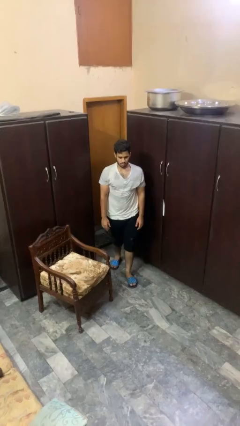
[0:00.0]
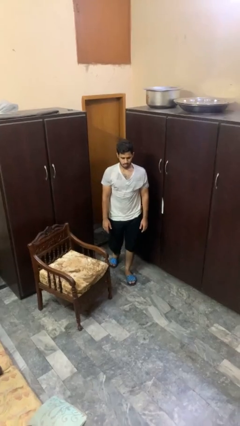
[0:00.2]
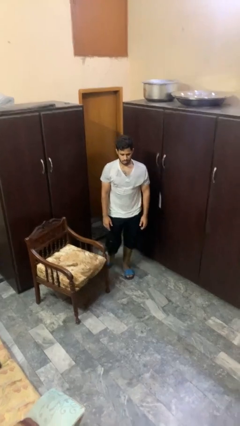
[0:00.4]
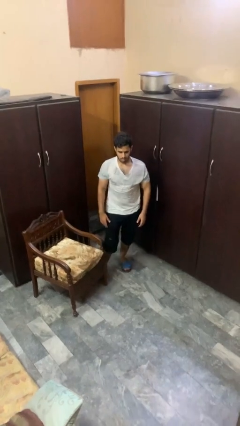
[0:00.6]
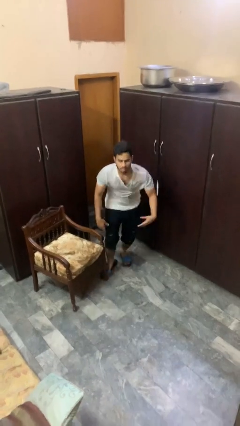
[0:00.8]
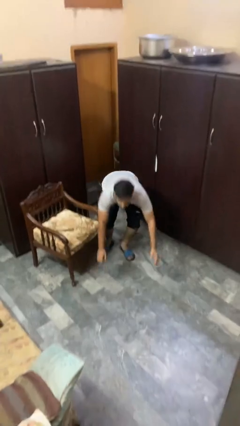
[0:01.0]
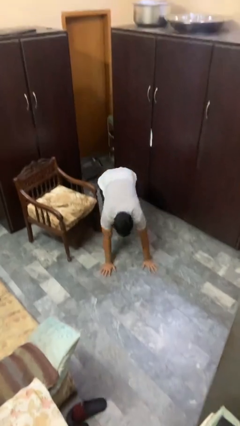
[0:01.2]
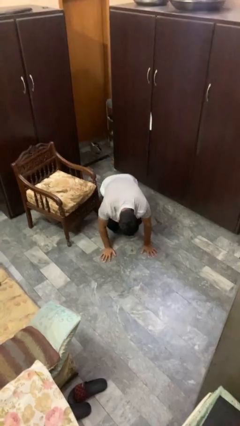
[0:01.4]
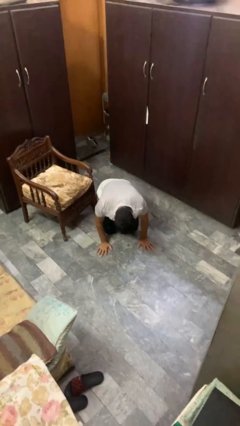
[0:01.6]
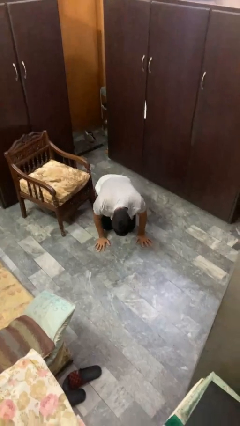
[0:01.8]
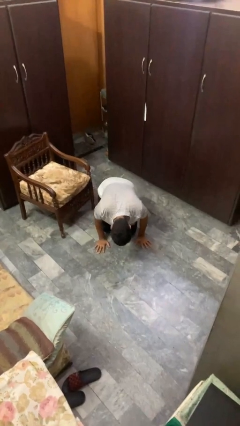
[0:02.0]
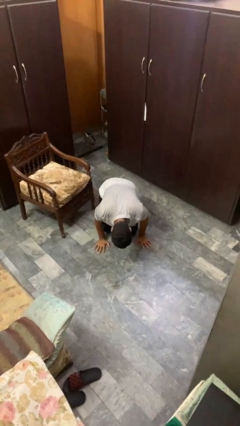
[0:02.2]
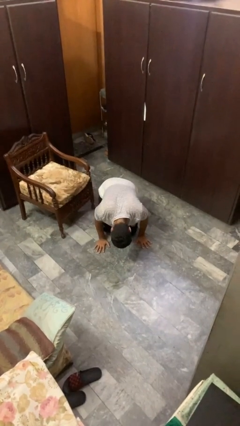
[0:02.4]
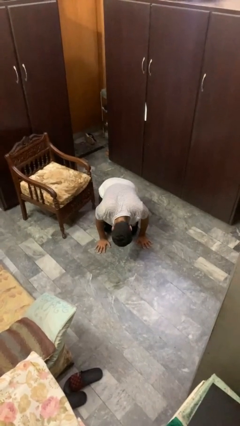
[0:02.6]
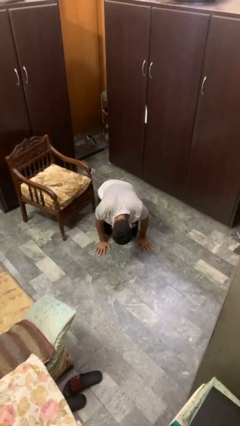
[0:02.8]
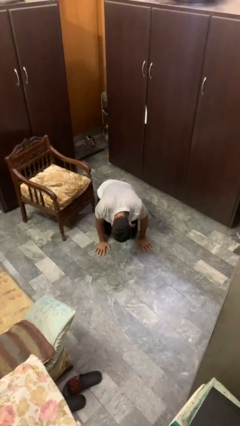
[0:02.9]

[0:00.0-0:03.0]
person trips on object on floor

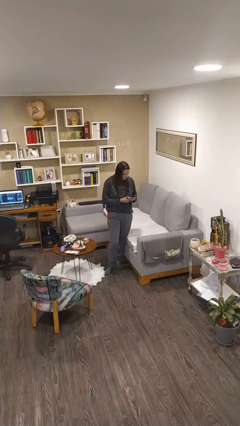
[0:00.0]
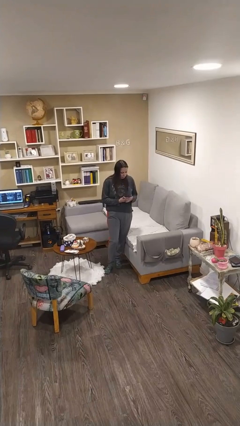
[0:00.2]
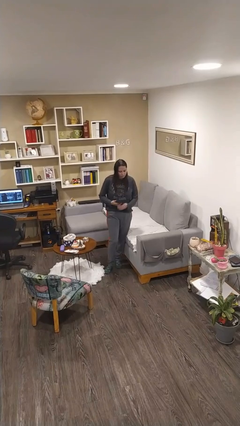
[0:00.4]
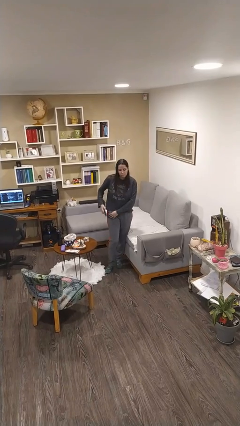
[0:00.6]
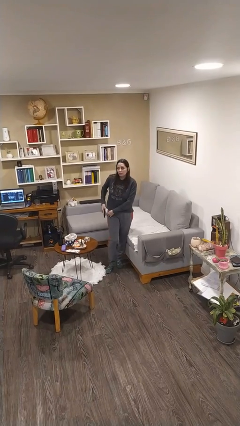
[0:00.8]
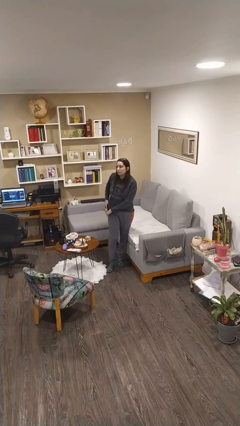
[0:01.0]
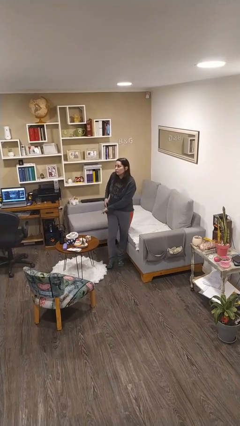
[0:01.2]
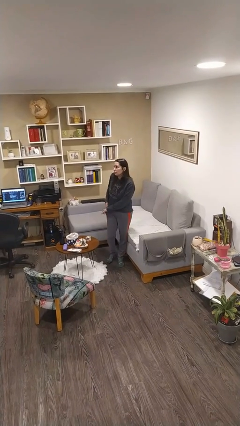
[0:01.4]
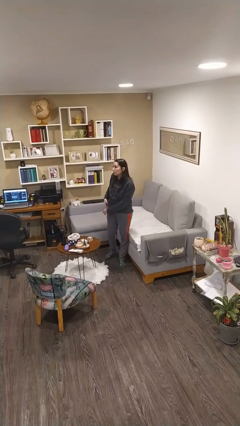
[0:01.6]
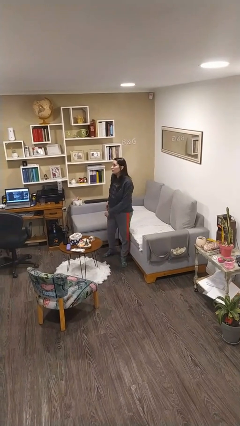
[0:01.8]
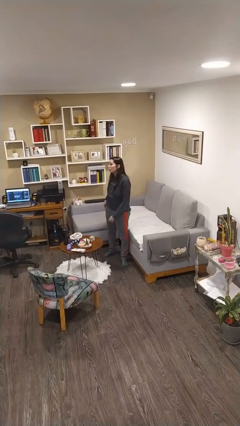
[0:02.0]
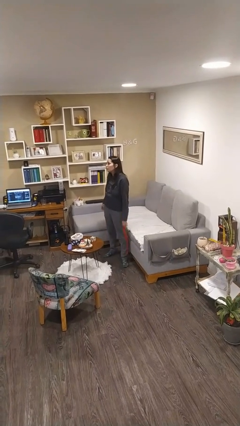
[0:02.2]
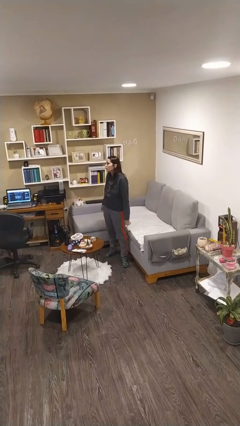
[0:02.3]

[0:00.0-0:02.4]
person puts phone into pocket

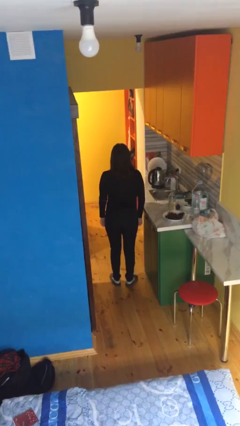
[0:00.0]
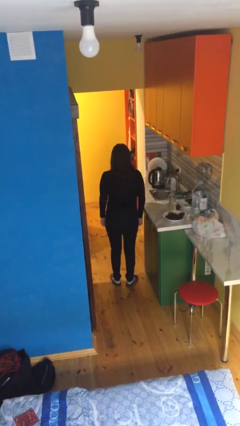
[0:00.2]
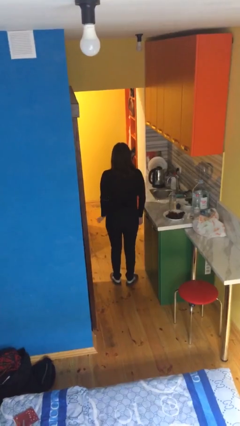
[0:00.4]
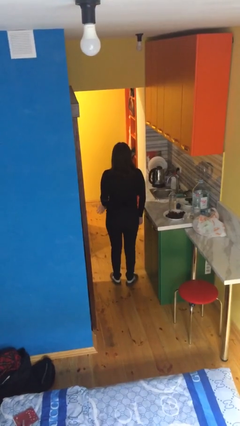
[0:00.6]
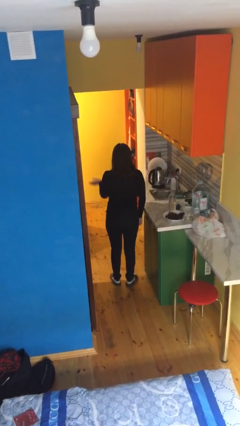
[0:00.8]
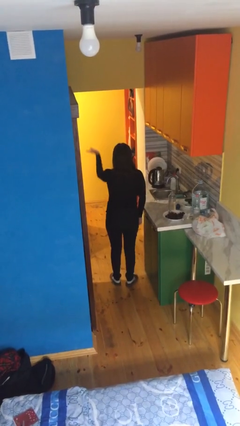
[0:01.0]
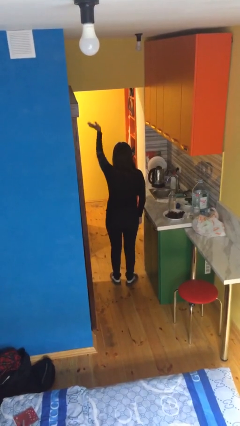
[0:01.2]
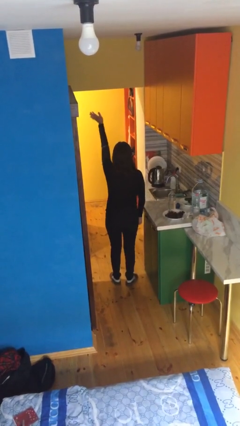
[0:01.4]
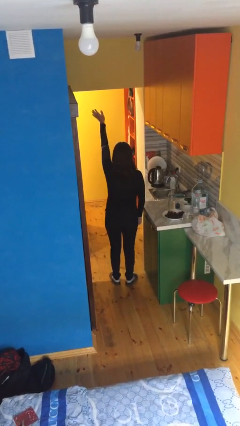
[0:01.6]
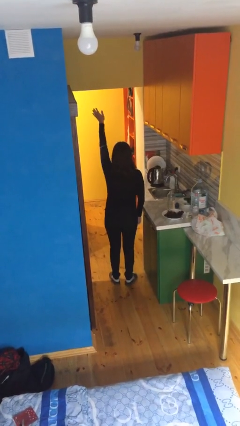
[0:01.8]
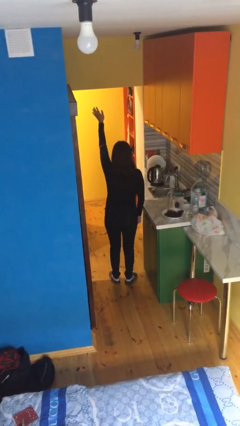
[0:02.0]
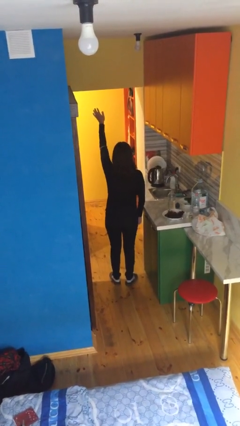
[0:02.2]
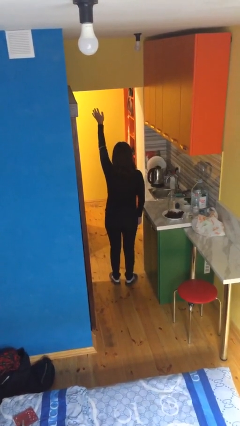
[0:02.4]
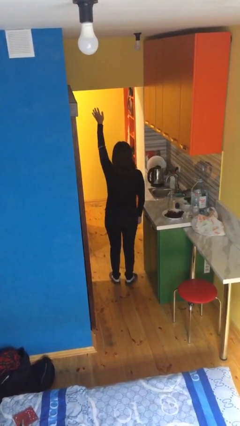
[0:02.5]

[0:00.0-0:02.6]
person gestures swipe up

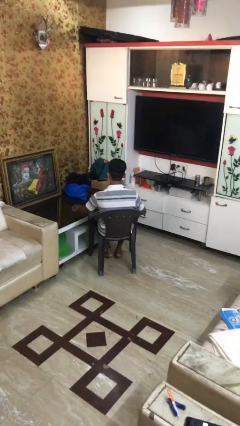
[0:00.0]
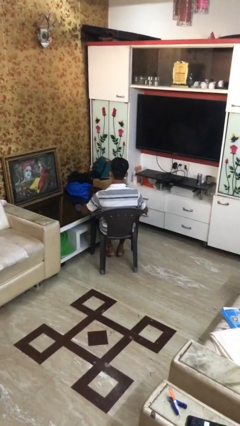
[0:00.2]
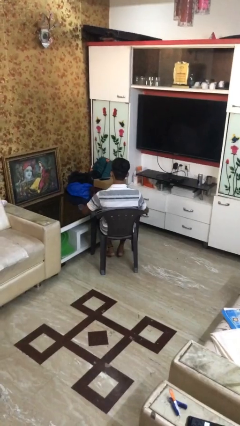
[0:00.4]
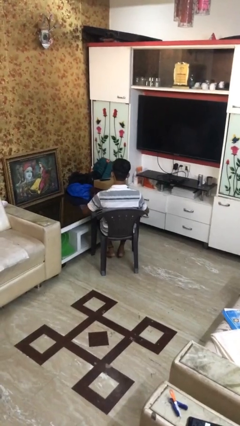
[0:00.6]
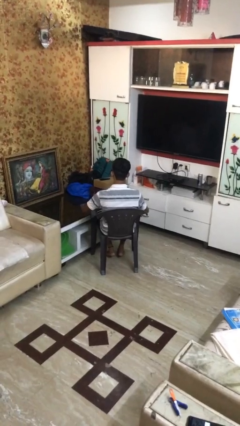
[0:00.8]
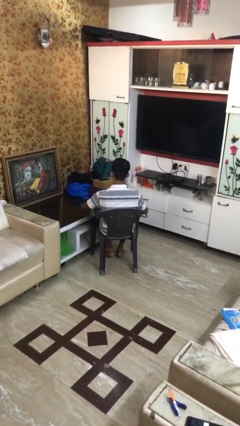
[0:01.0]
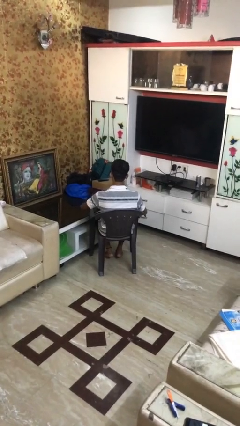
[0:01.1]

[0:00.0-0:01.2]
person knocks over glass

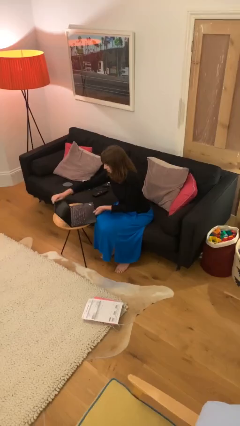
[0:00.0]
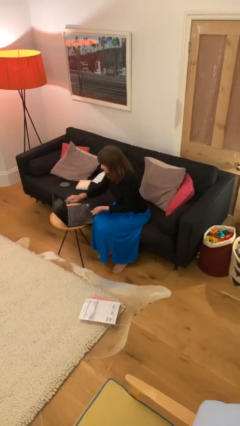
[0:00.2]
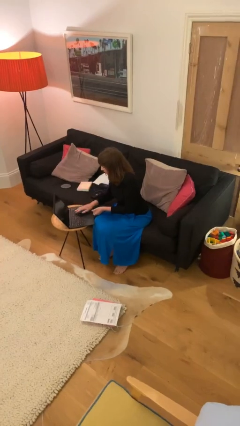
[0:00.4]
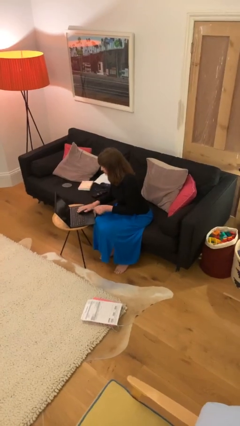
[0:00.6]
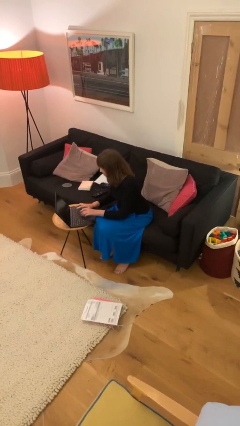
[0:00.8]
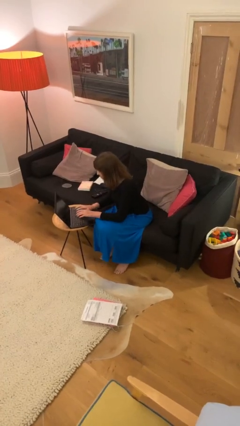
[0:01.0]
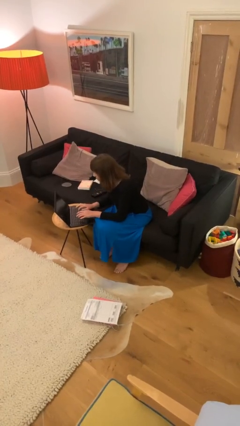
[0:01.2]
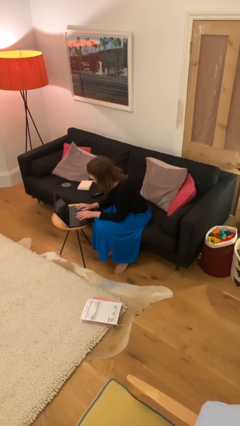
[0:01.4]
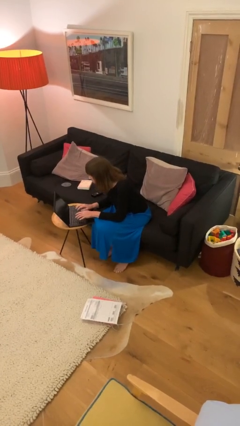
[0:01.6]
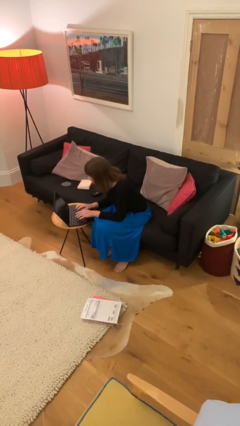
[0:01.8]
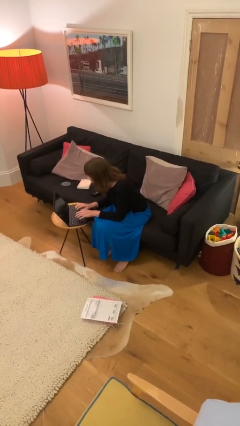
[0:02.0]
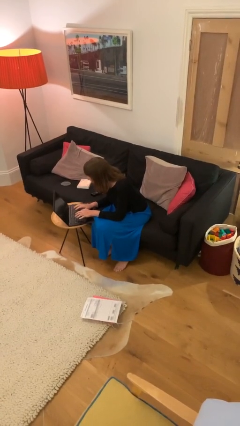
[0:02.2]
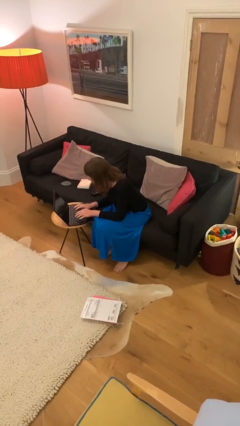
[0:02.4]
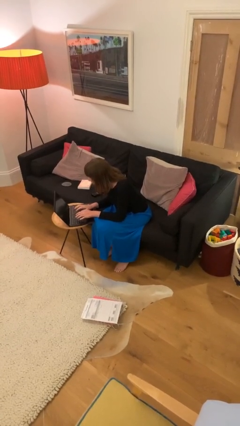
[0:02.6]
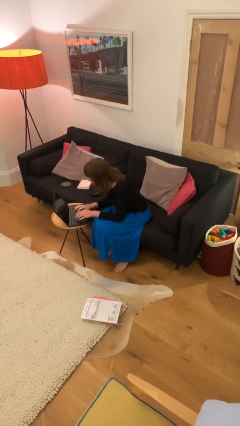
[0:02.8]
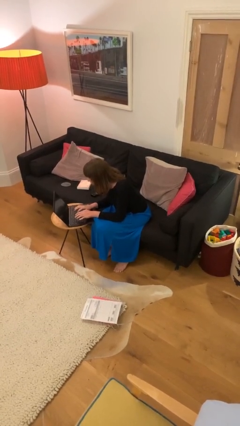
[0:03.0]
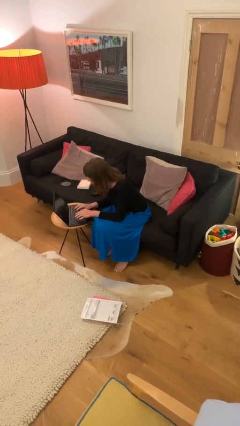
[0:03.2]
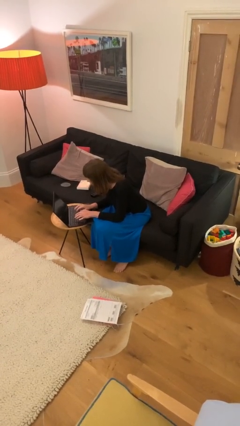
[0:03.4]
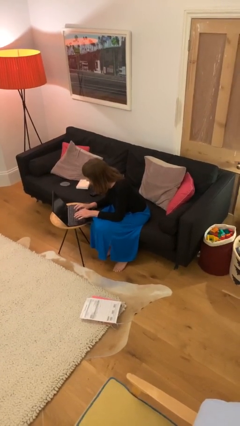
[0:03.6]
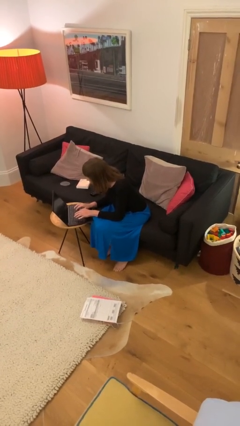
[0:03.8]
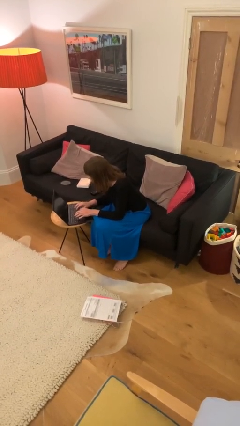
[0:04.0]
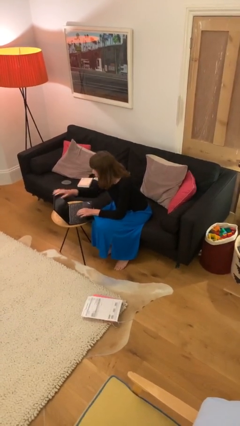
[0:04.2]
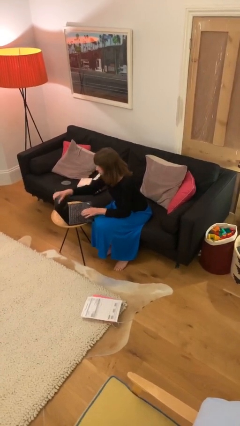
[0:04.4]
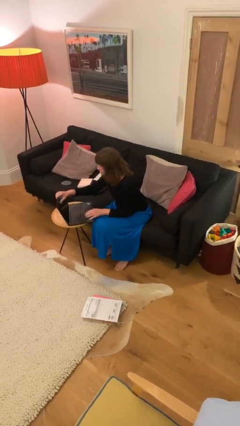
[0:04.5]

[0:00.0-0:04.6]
person interacts with laptop

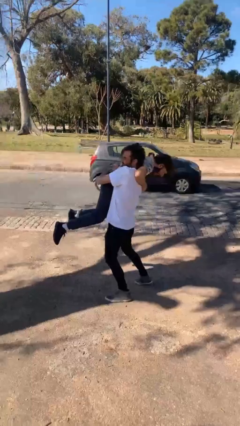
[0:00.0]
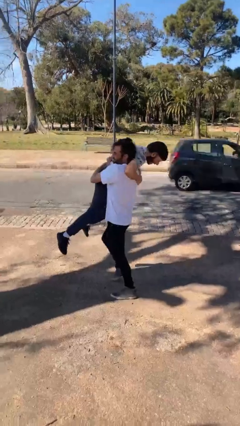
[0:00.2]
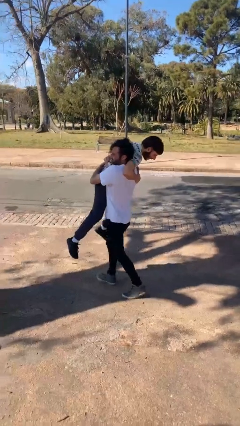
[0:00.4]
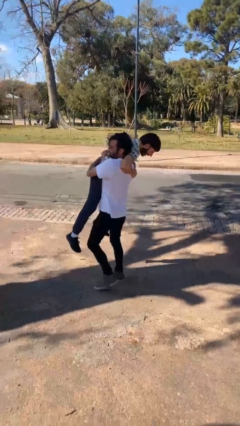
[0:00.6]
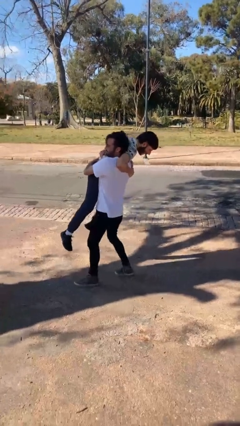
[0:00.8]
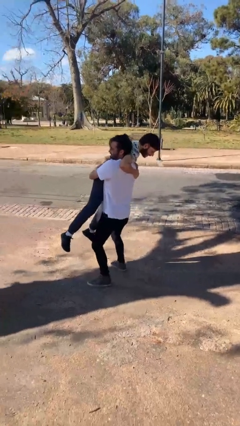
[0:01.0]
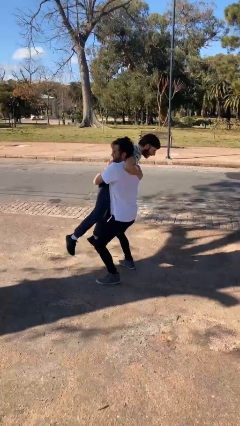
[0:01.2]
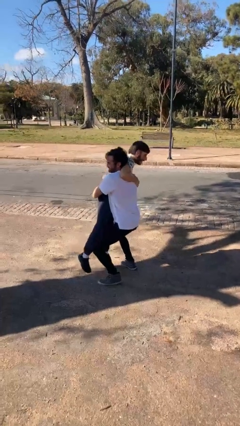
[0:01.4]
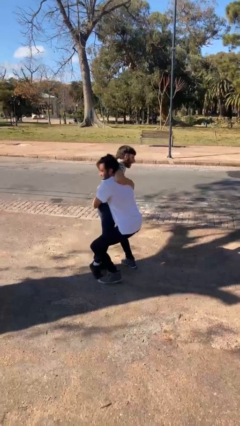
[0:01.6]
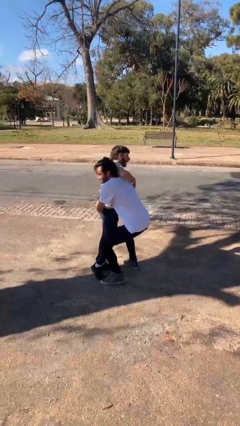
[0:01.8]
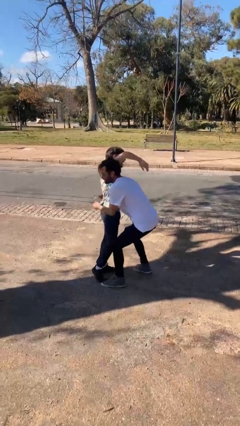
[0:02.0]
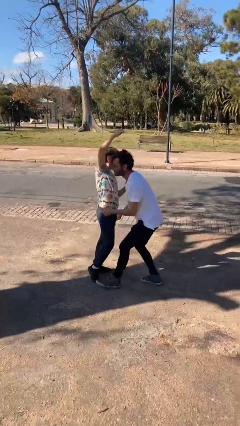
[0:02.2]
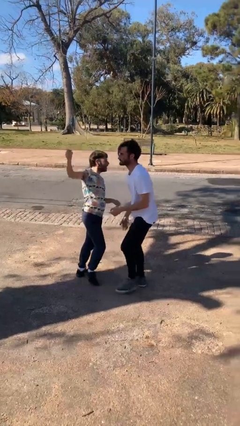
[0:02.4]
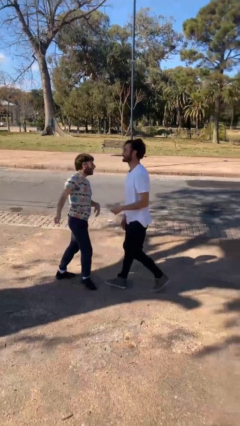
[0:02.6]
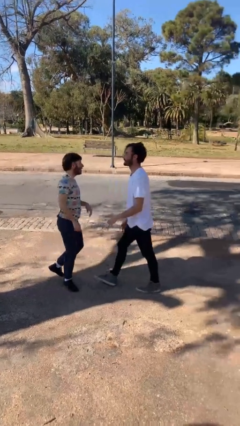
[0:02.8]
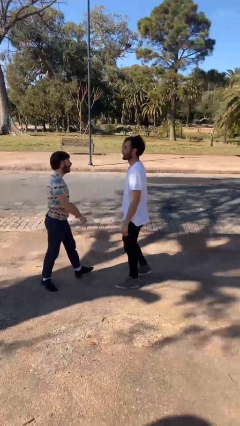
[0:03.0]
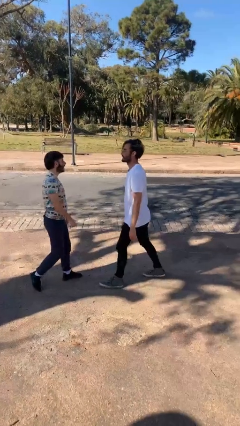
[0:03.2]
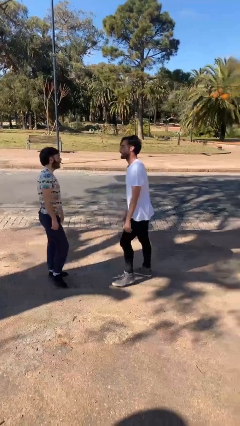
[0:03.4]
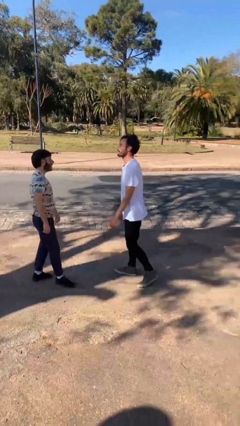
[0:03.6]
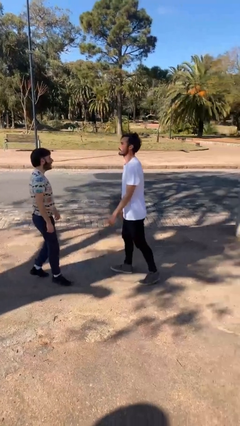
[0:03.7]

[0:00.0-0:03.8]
person puts down person
